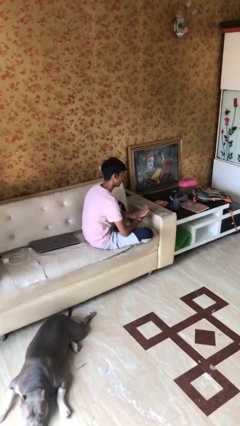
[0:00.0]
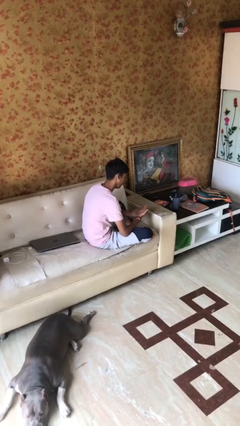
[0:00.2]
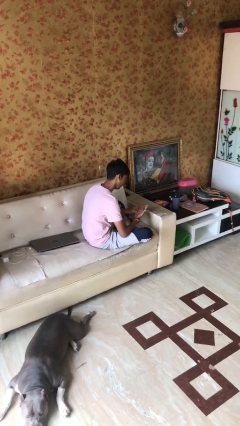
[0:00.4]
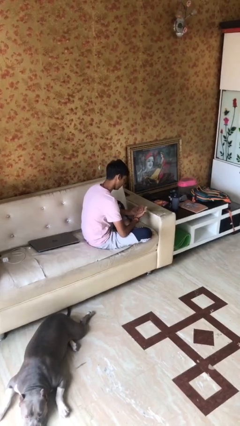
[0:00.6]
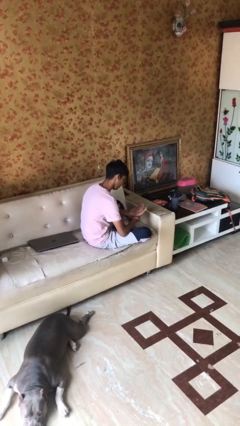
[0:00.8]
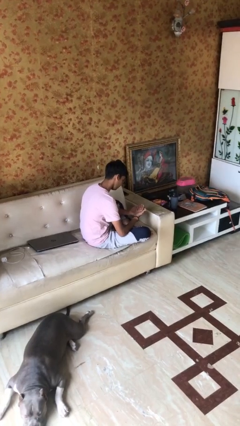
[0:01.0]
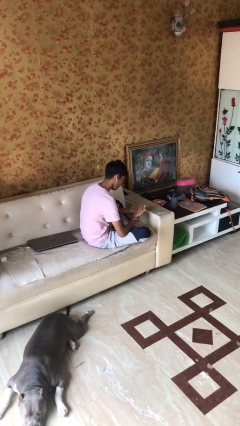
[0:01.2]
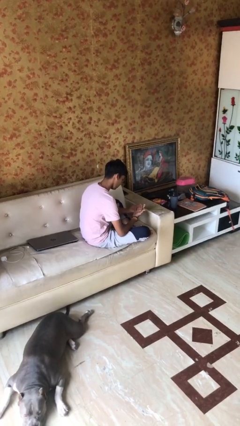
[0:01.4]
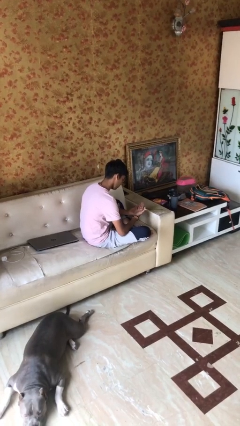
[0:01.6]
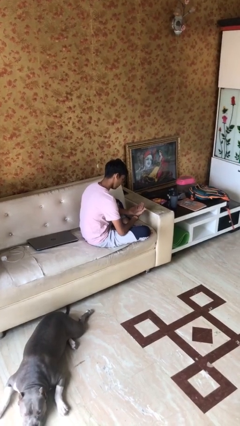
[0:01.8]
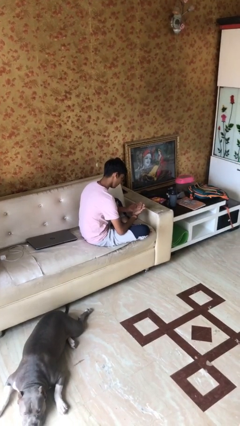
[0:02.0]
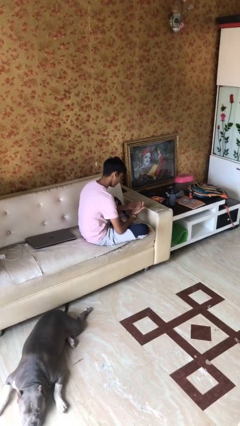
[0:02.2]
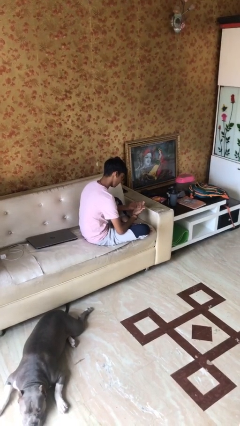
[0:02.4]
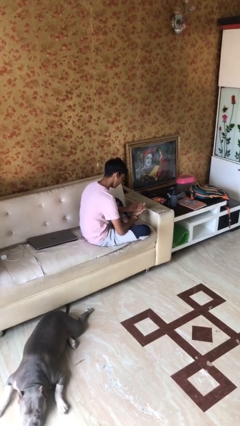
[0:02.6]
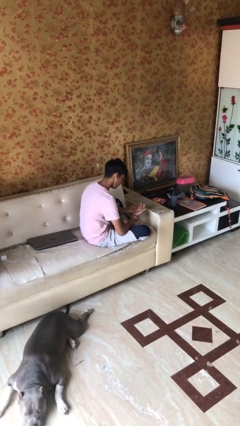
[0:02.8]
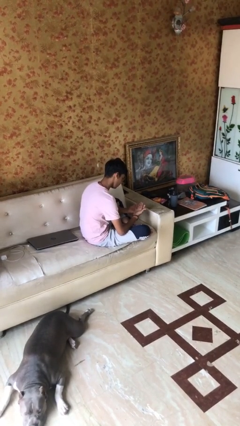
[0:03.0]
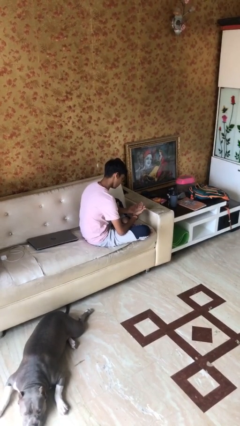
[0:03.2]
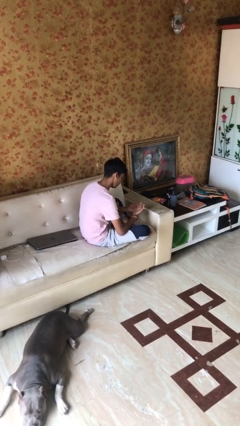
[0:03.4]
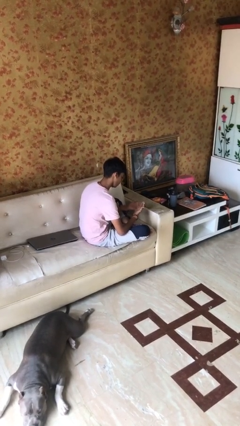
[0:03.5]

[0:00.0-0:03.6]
person looks at hands in lap

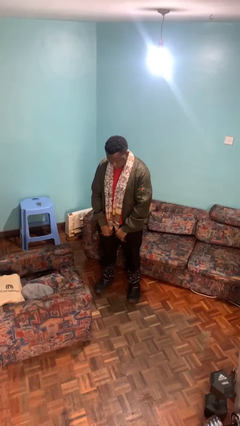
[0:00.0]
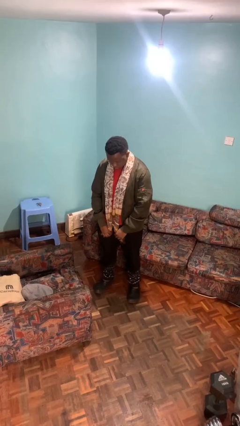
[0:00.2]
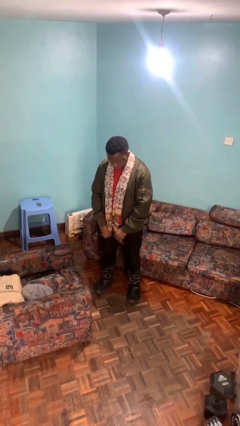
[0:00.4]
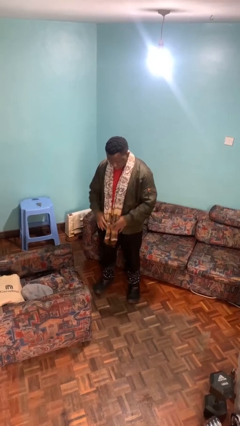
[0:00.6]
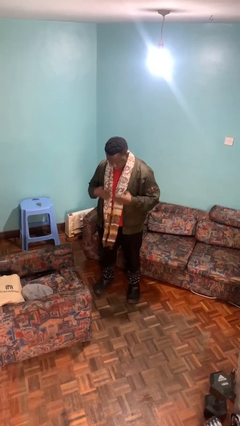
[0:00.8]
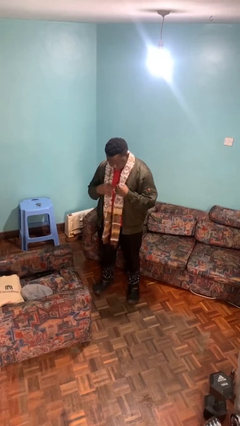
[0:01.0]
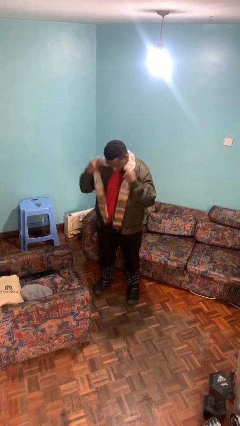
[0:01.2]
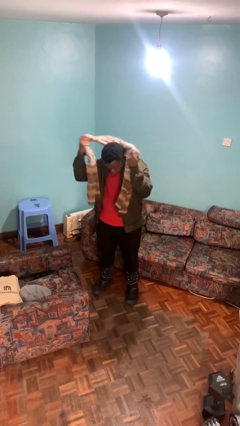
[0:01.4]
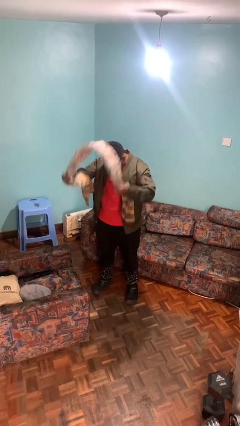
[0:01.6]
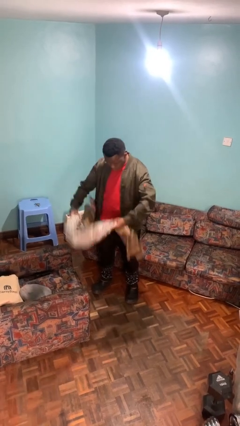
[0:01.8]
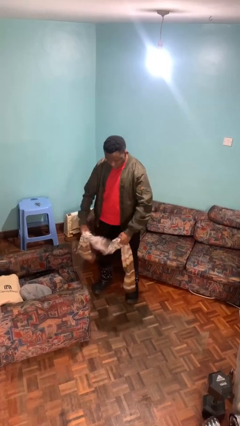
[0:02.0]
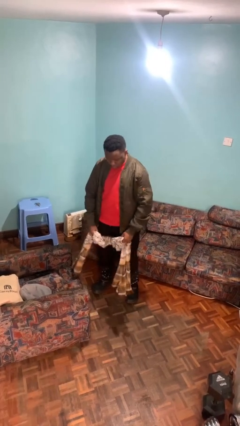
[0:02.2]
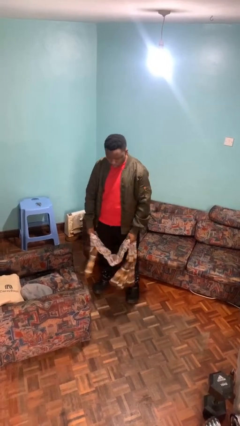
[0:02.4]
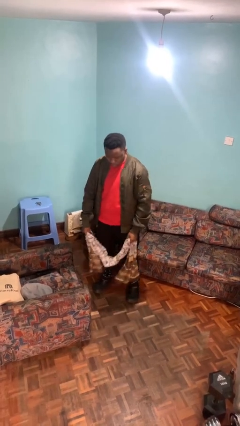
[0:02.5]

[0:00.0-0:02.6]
person takes off scarf

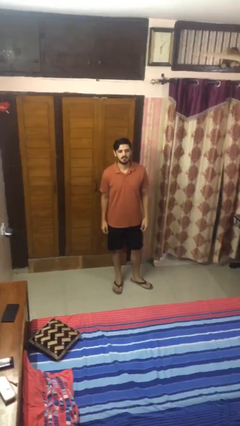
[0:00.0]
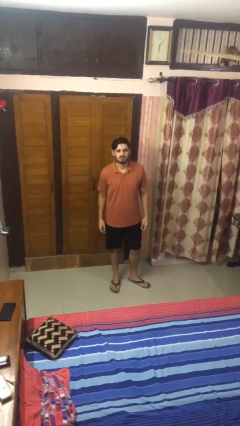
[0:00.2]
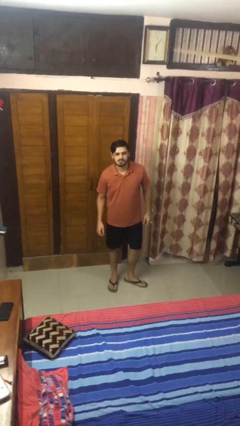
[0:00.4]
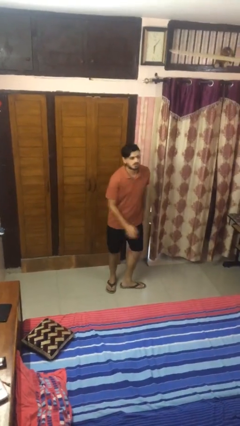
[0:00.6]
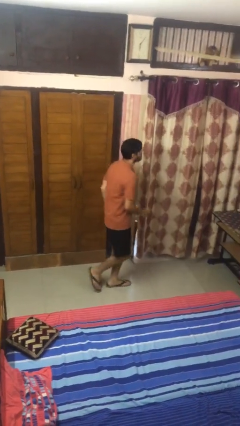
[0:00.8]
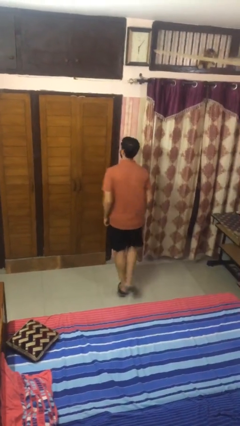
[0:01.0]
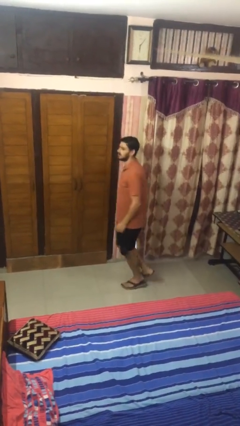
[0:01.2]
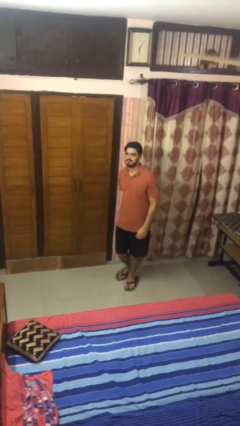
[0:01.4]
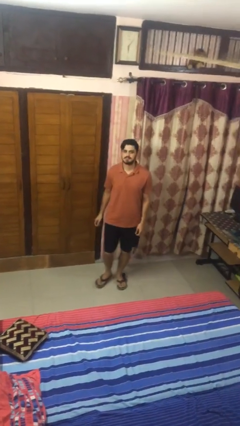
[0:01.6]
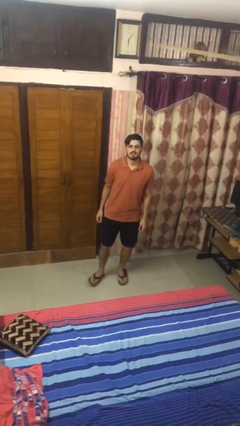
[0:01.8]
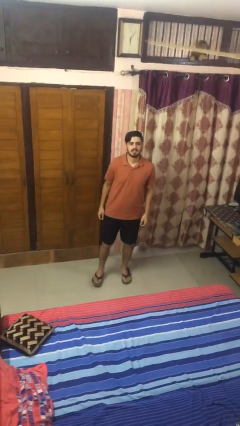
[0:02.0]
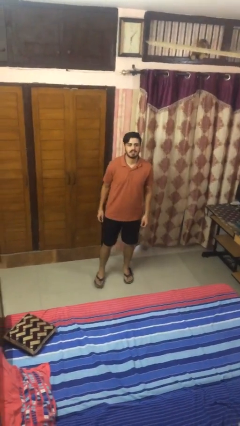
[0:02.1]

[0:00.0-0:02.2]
person twirls

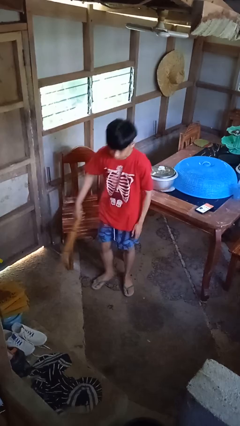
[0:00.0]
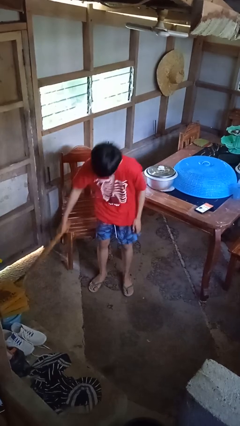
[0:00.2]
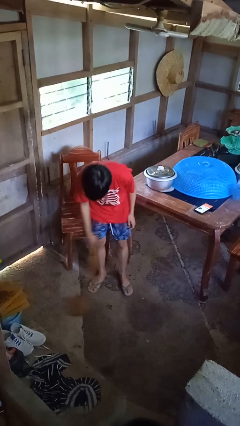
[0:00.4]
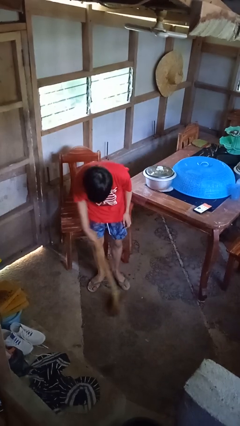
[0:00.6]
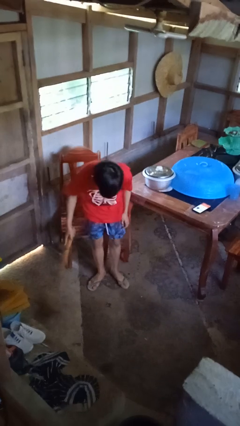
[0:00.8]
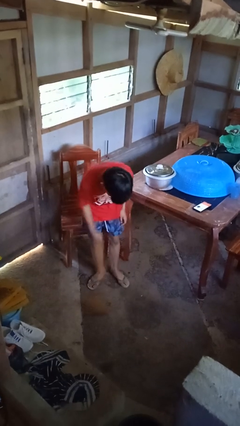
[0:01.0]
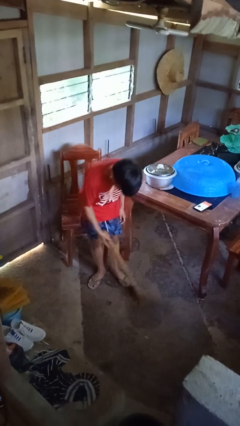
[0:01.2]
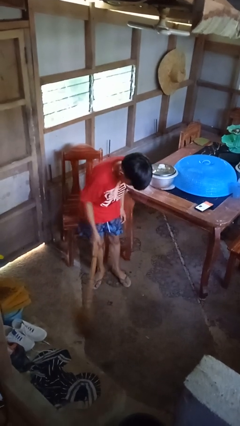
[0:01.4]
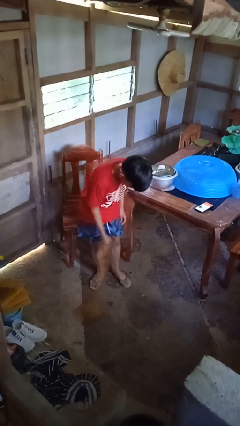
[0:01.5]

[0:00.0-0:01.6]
person sweeps floor

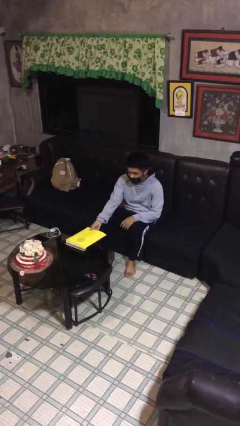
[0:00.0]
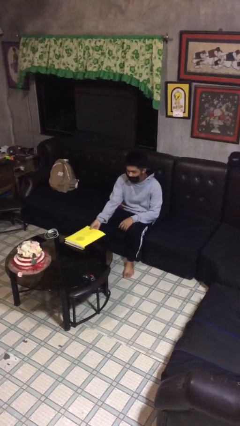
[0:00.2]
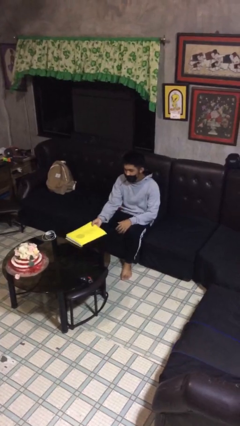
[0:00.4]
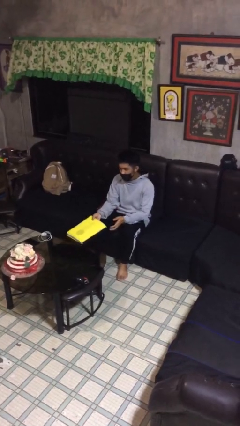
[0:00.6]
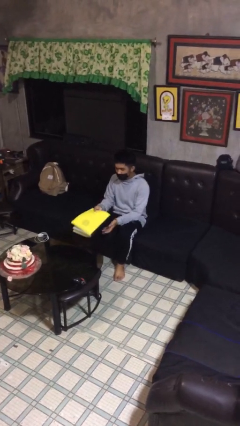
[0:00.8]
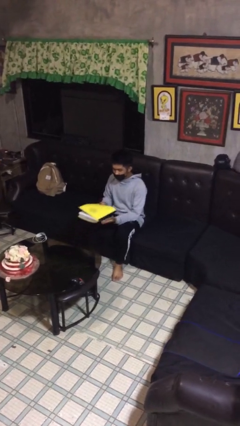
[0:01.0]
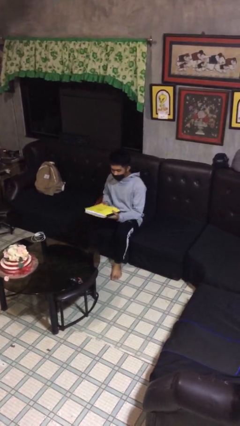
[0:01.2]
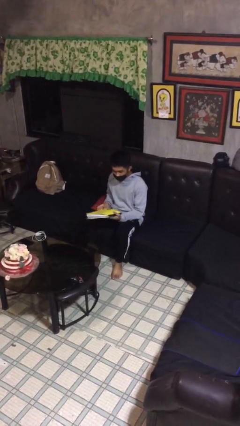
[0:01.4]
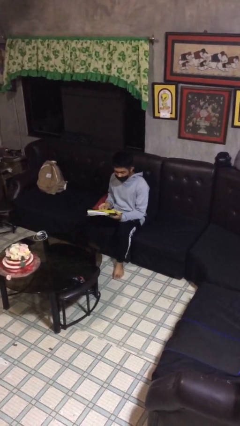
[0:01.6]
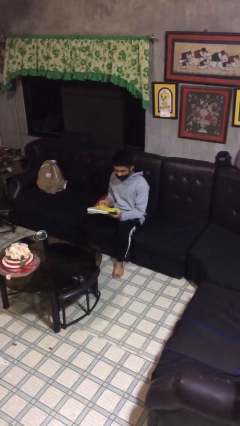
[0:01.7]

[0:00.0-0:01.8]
person picks up object from table

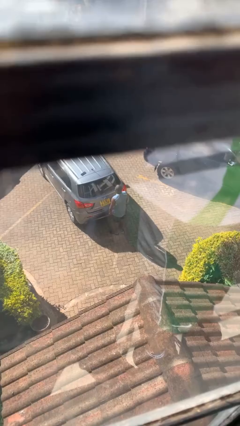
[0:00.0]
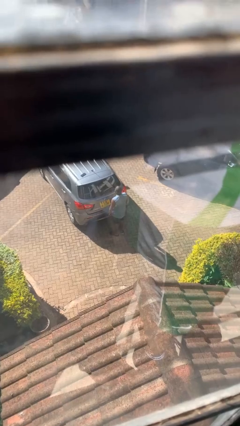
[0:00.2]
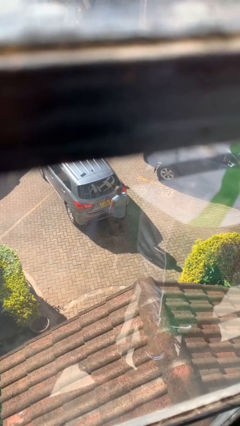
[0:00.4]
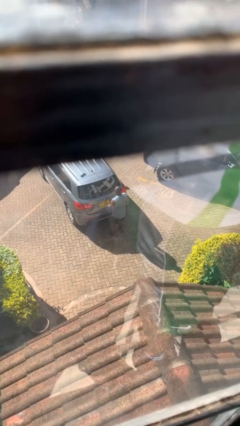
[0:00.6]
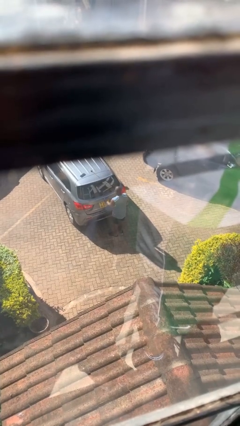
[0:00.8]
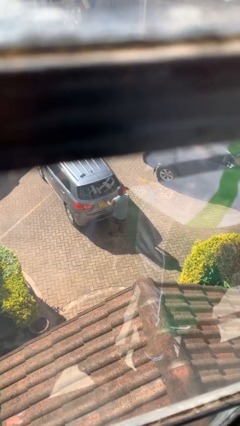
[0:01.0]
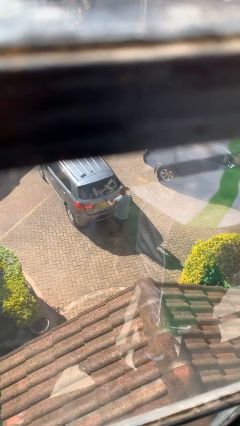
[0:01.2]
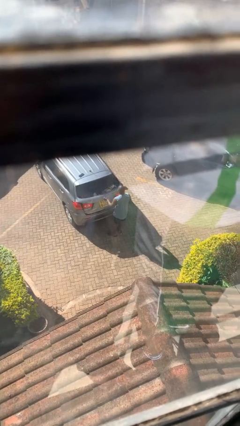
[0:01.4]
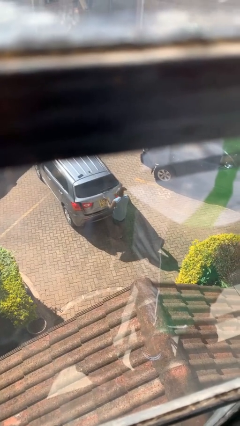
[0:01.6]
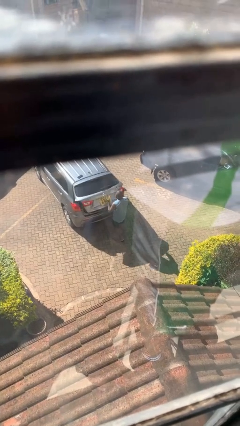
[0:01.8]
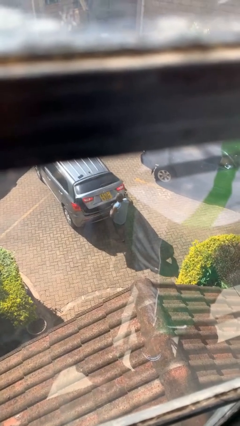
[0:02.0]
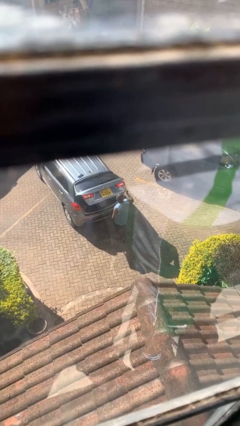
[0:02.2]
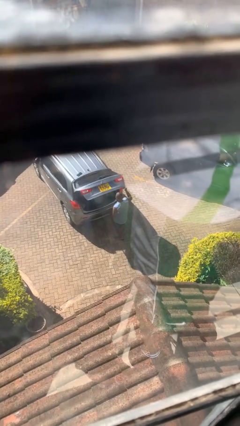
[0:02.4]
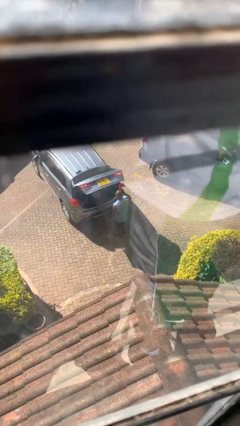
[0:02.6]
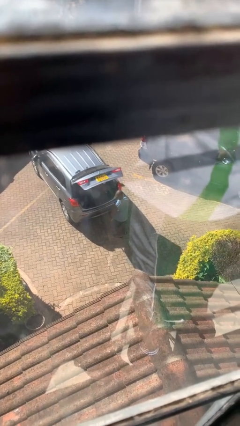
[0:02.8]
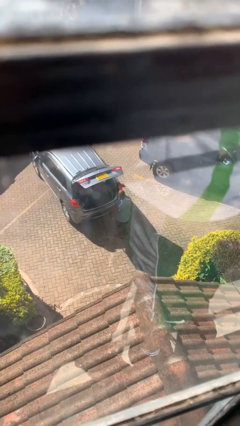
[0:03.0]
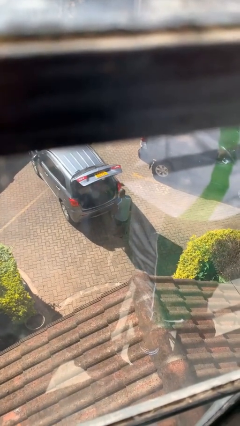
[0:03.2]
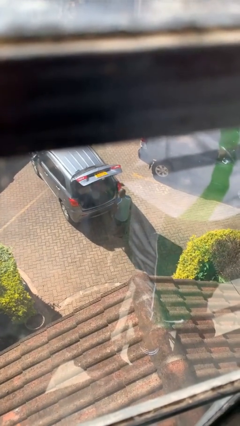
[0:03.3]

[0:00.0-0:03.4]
person opens car trunk

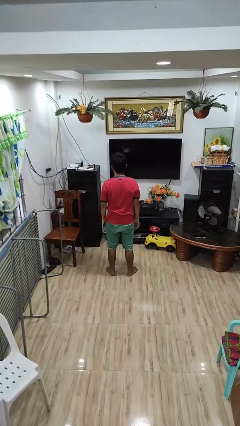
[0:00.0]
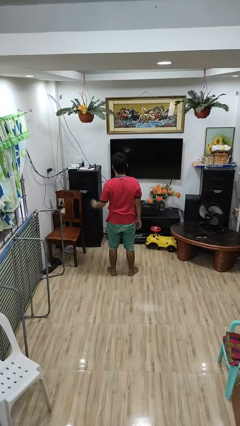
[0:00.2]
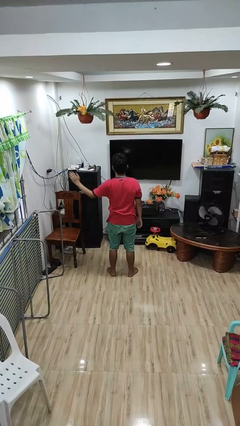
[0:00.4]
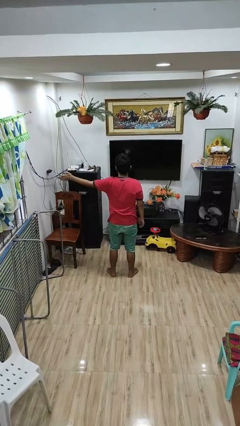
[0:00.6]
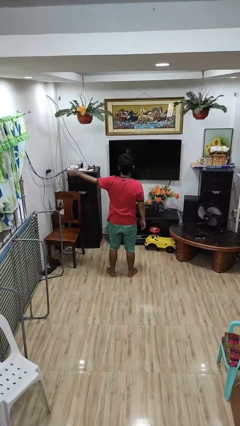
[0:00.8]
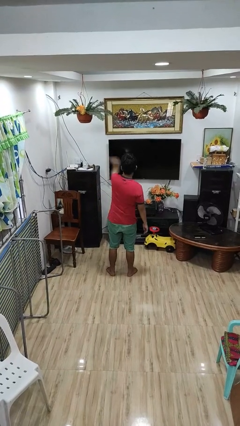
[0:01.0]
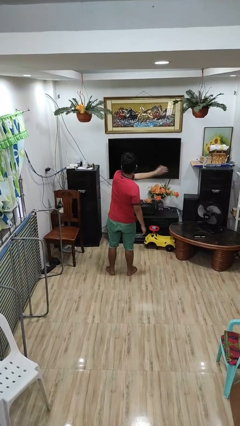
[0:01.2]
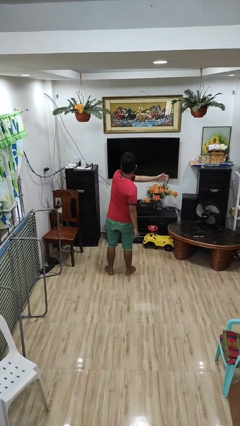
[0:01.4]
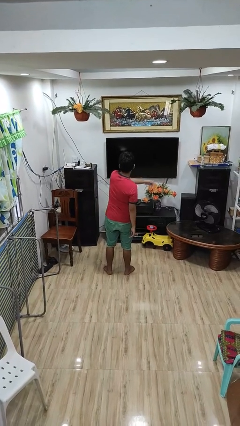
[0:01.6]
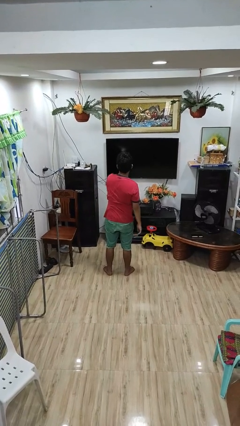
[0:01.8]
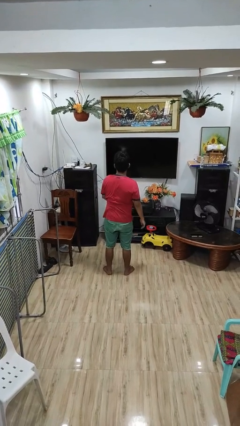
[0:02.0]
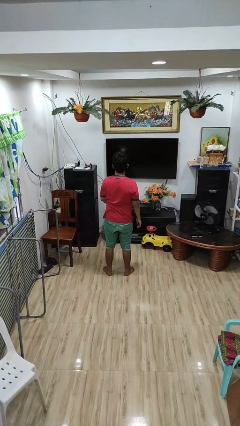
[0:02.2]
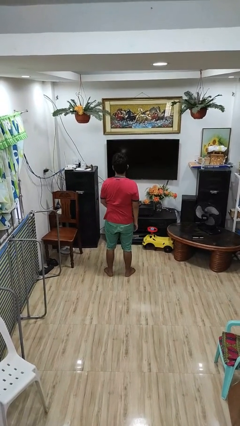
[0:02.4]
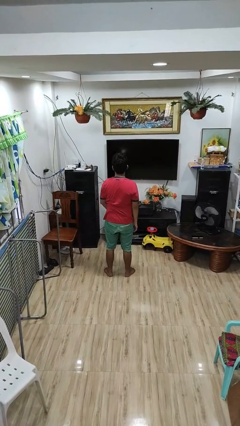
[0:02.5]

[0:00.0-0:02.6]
person gestures swipe right
